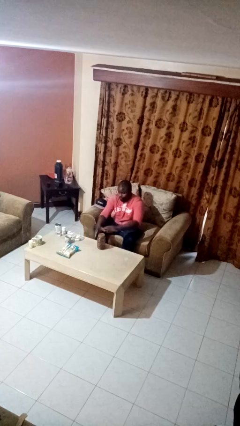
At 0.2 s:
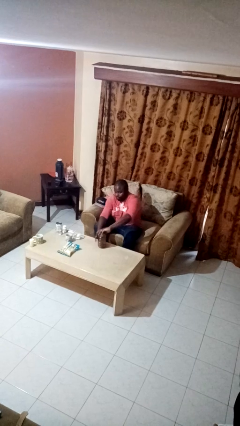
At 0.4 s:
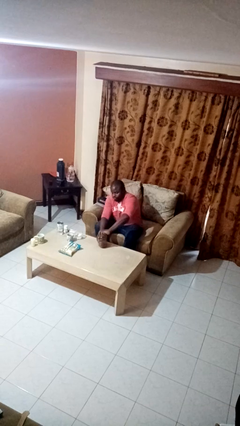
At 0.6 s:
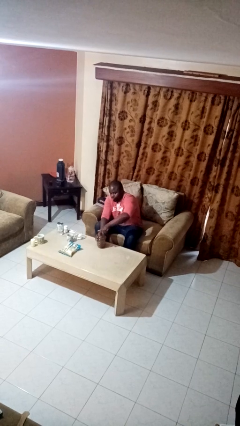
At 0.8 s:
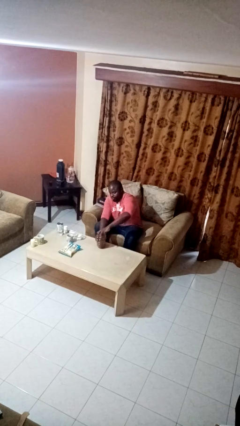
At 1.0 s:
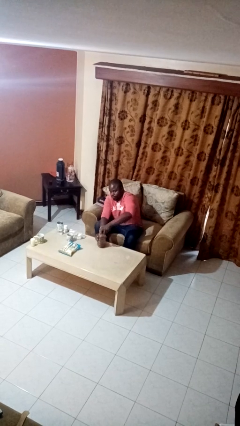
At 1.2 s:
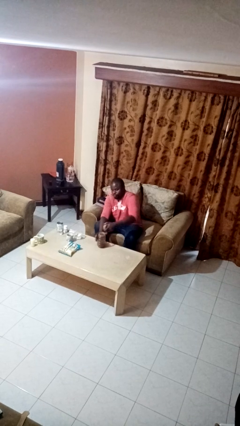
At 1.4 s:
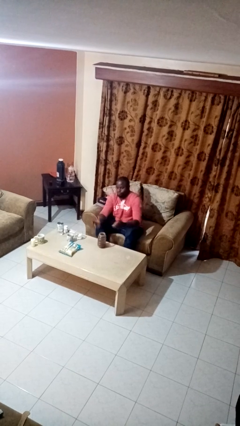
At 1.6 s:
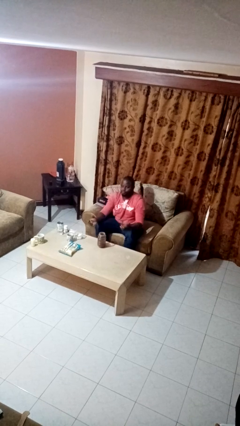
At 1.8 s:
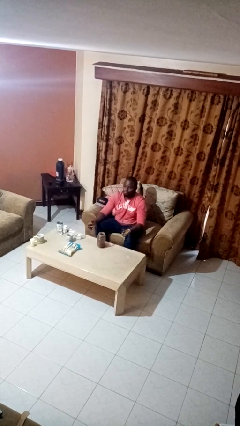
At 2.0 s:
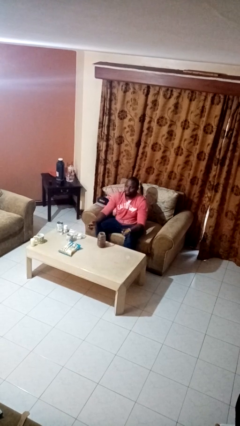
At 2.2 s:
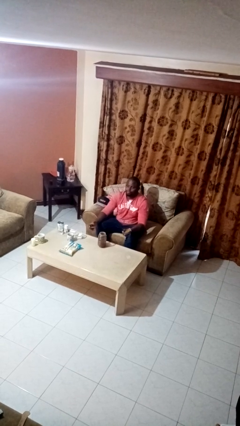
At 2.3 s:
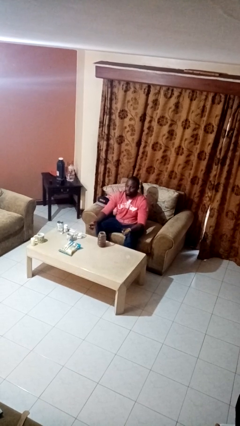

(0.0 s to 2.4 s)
person opens jar

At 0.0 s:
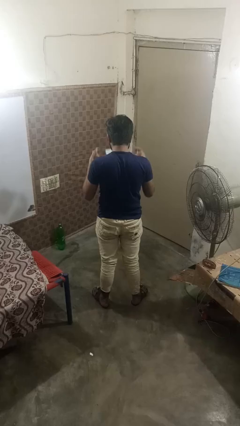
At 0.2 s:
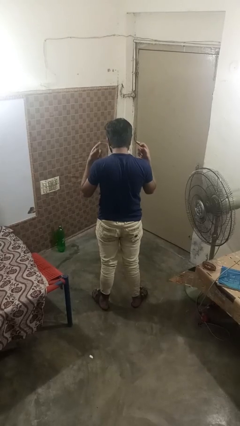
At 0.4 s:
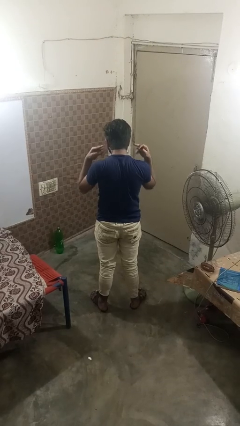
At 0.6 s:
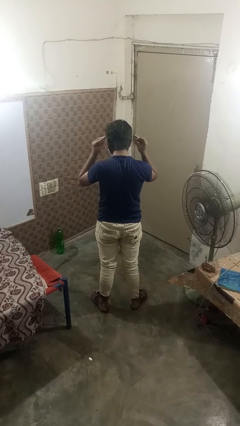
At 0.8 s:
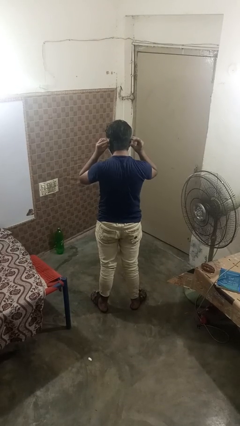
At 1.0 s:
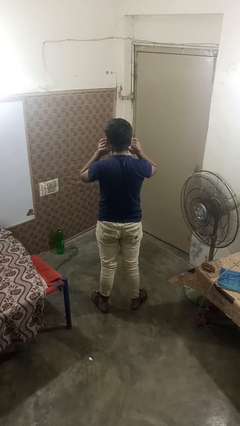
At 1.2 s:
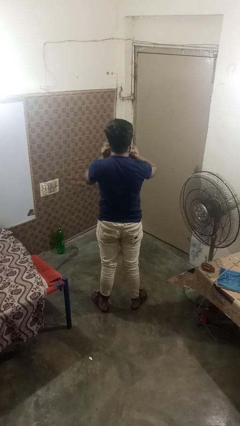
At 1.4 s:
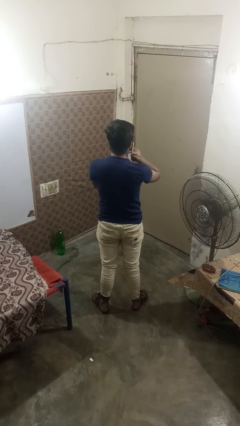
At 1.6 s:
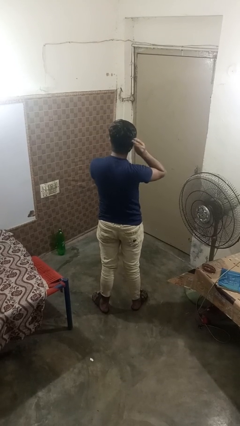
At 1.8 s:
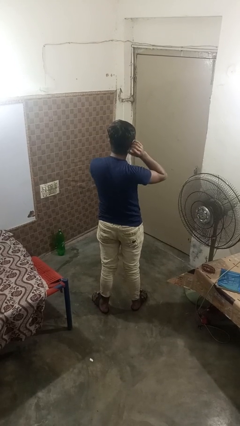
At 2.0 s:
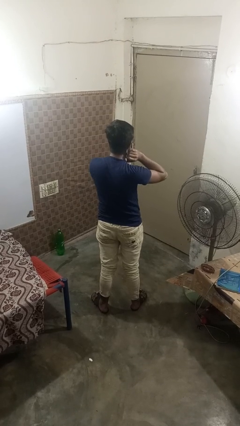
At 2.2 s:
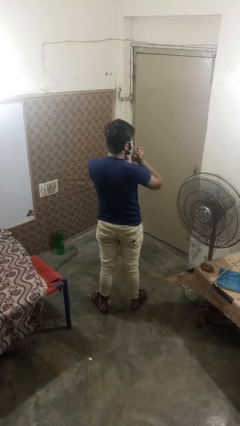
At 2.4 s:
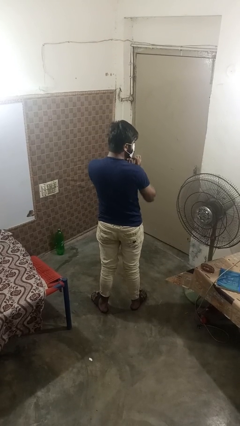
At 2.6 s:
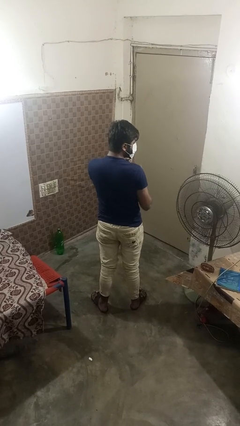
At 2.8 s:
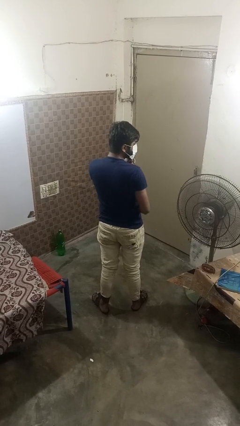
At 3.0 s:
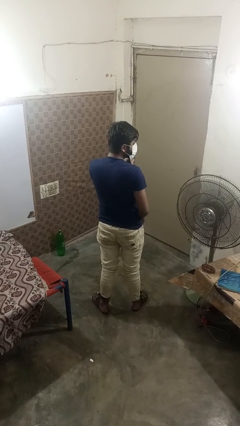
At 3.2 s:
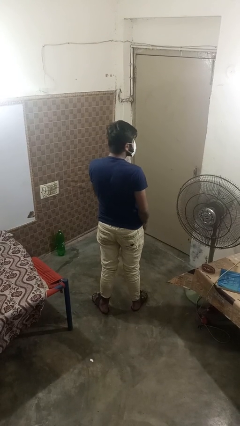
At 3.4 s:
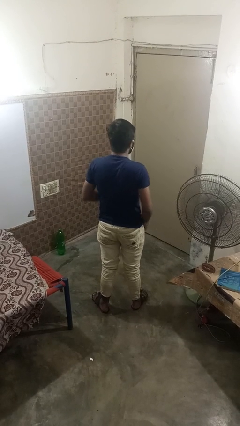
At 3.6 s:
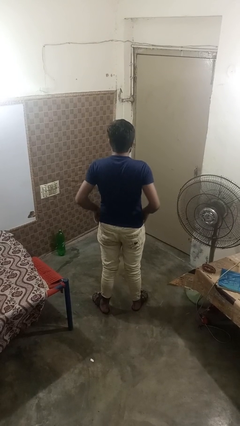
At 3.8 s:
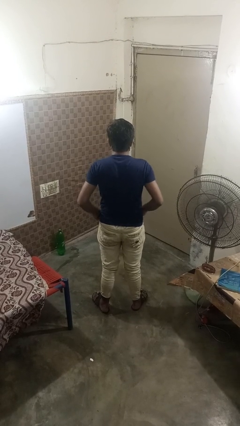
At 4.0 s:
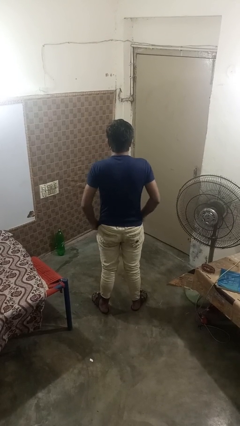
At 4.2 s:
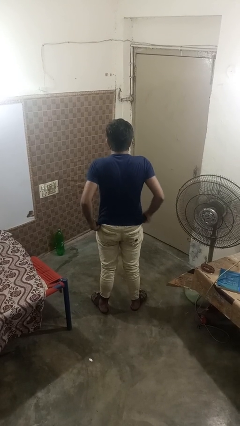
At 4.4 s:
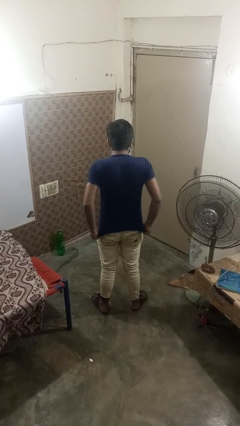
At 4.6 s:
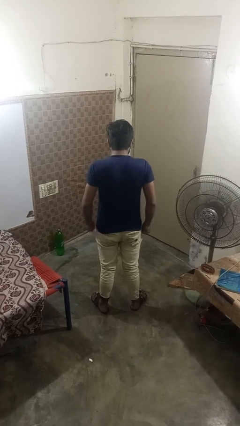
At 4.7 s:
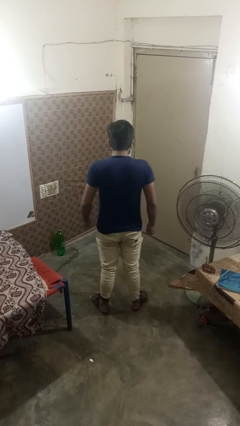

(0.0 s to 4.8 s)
person puts on facemask

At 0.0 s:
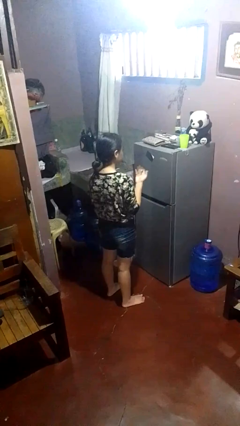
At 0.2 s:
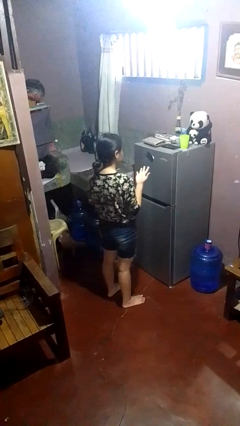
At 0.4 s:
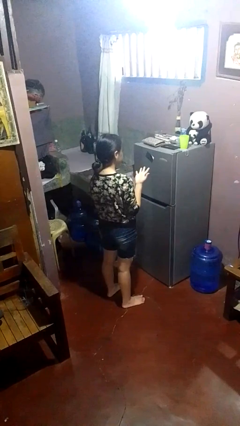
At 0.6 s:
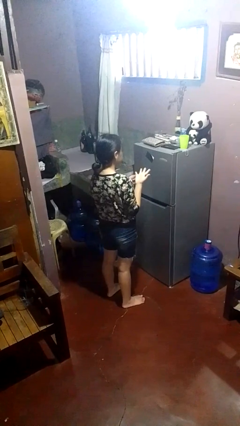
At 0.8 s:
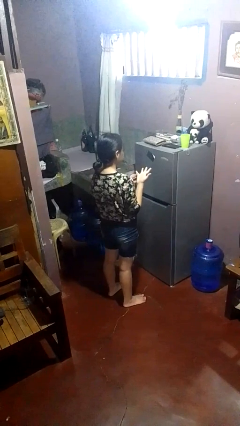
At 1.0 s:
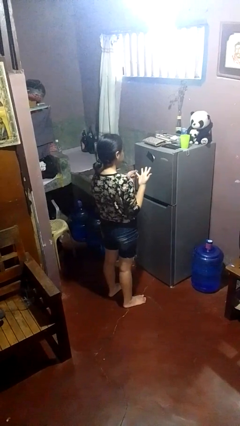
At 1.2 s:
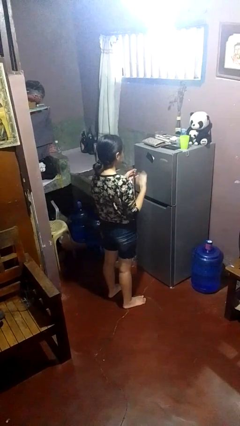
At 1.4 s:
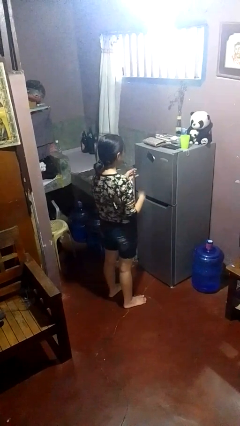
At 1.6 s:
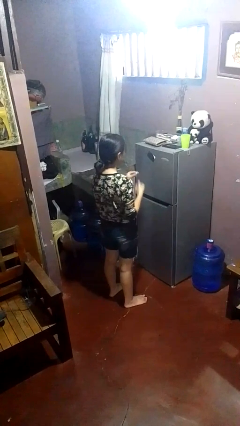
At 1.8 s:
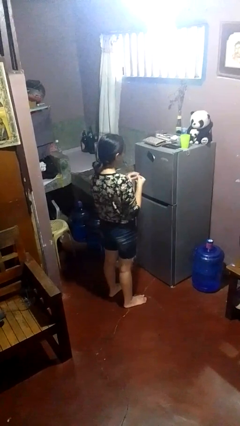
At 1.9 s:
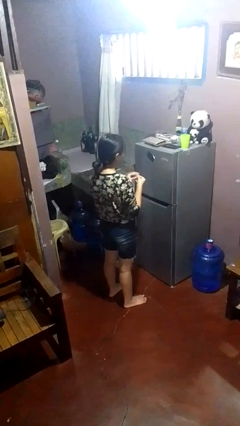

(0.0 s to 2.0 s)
person takes off ring

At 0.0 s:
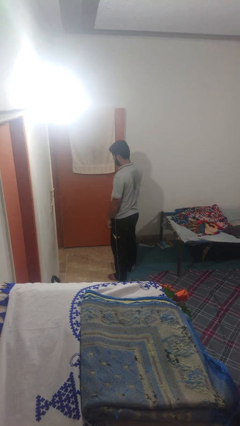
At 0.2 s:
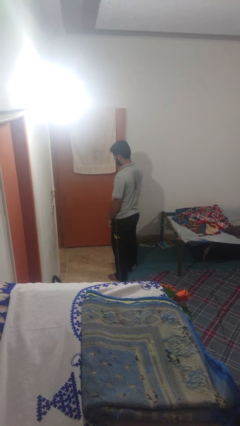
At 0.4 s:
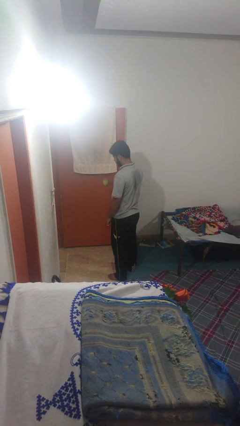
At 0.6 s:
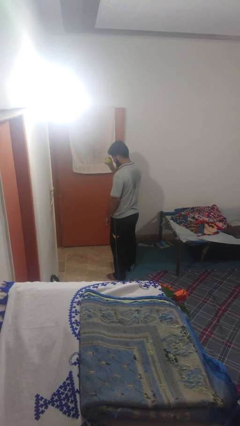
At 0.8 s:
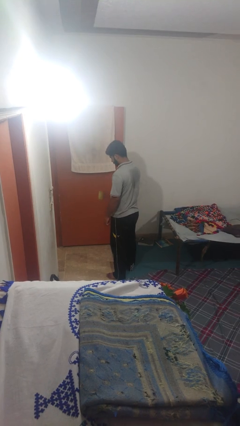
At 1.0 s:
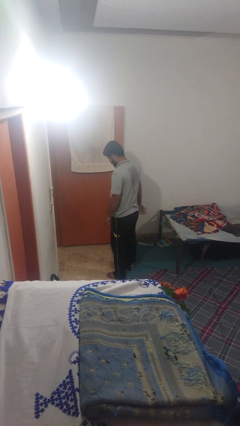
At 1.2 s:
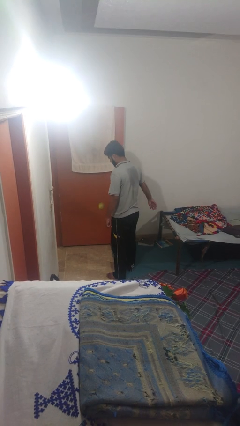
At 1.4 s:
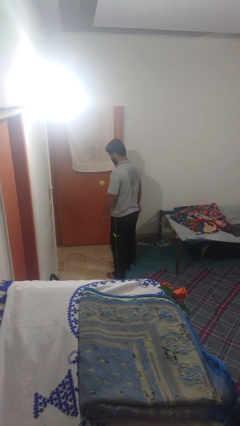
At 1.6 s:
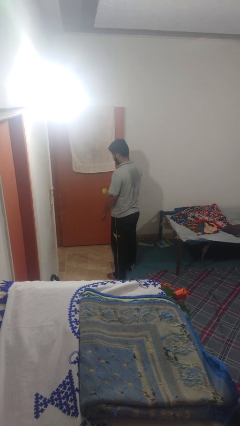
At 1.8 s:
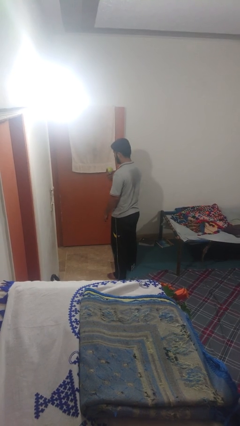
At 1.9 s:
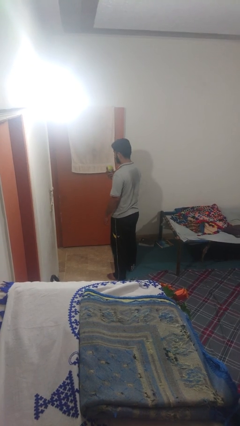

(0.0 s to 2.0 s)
person bounces ball on floor

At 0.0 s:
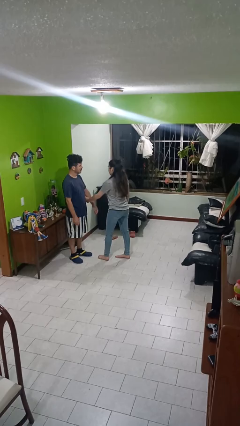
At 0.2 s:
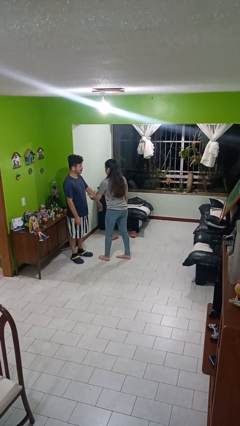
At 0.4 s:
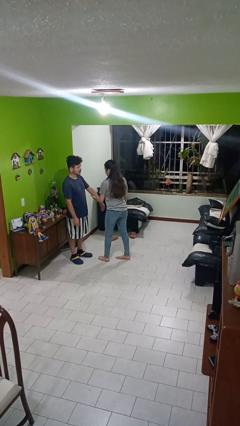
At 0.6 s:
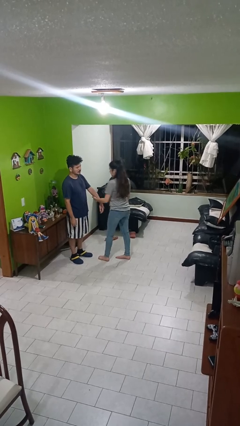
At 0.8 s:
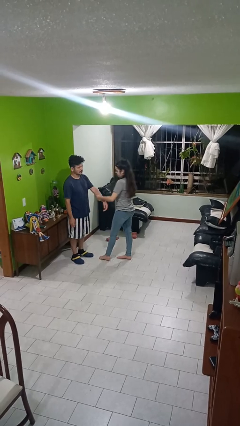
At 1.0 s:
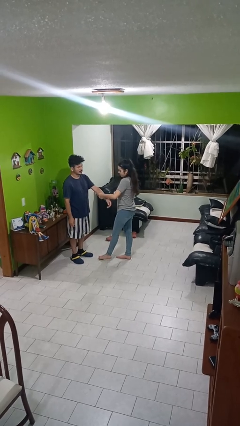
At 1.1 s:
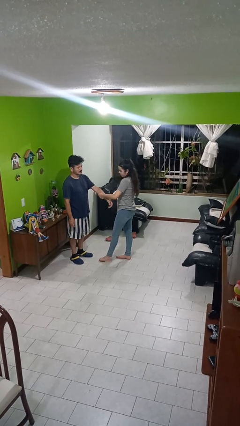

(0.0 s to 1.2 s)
person grabs person by forearm

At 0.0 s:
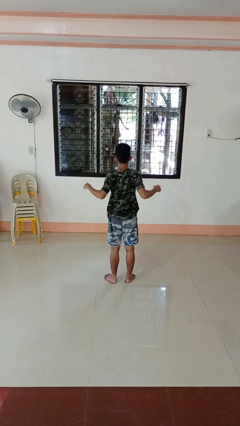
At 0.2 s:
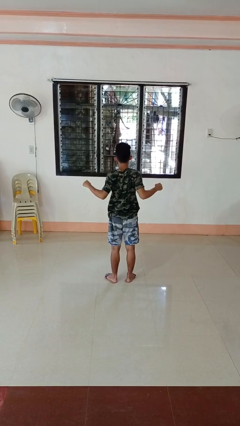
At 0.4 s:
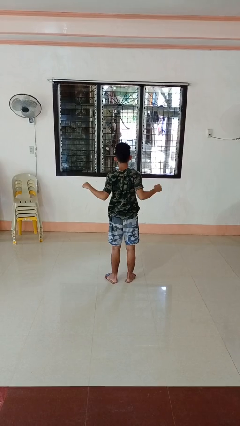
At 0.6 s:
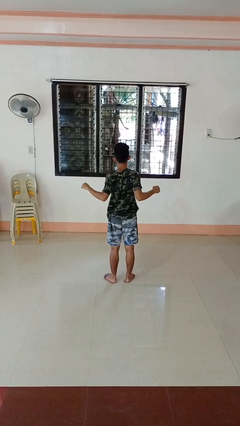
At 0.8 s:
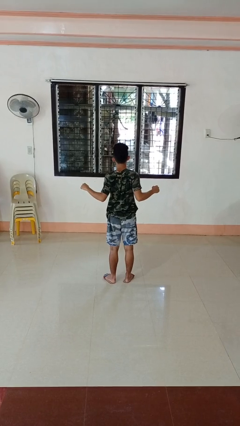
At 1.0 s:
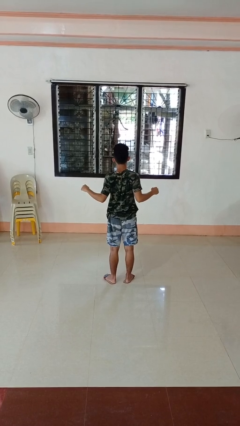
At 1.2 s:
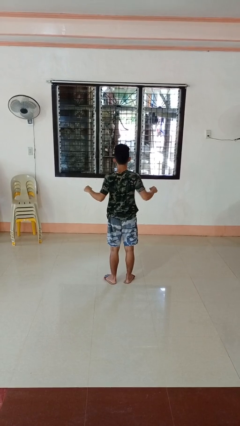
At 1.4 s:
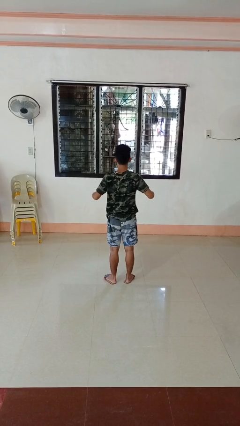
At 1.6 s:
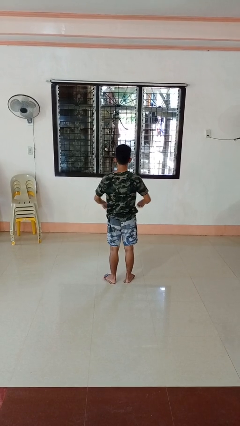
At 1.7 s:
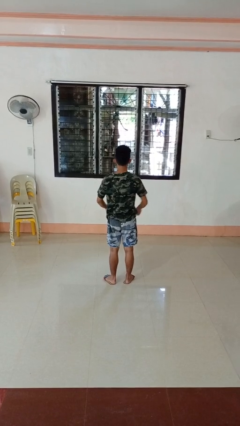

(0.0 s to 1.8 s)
person stretches back

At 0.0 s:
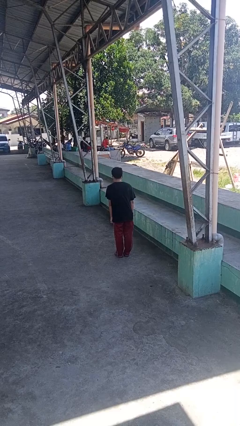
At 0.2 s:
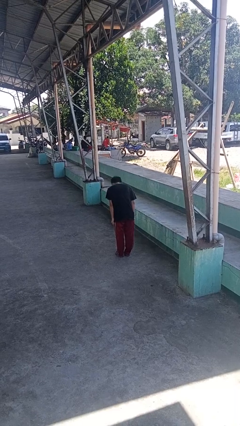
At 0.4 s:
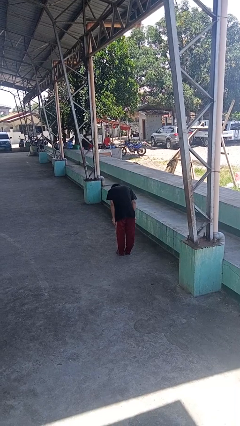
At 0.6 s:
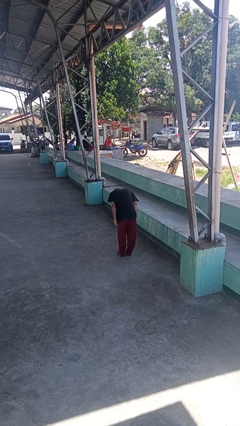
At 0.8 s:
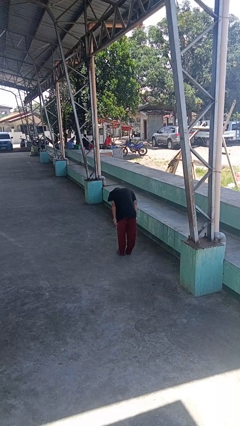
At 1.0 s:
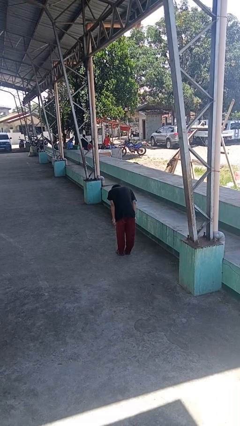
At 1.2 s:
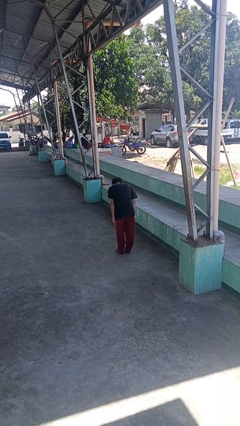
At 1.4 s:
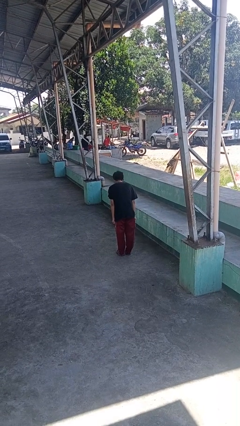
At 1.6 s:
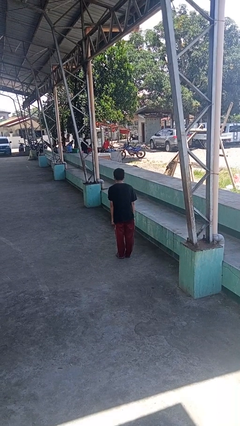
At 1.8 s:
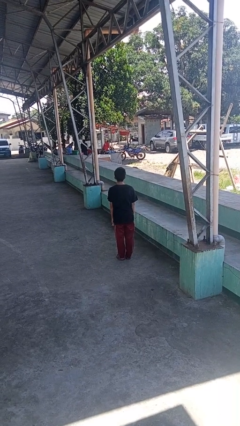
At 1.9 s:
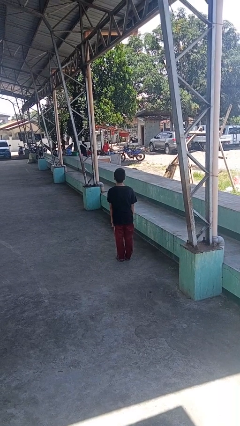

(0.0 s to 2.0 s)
person bows

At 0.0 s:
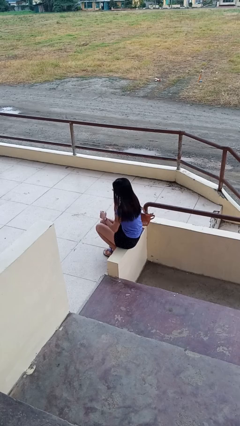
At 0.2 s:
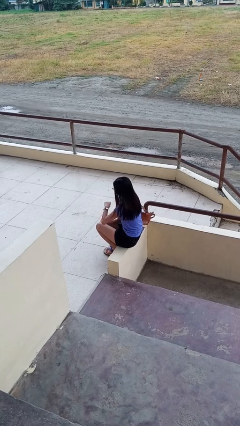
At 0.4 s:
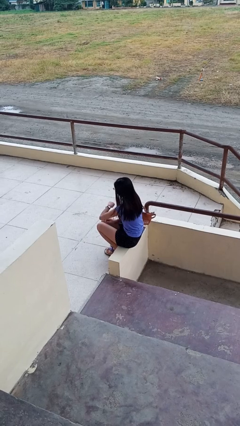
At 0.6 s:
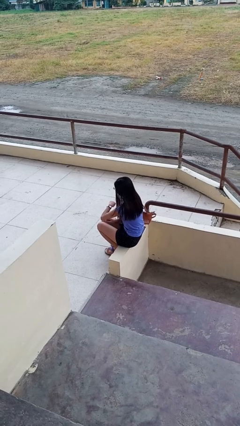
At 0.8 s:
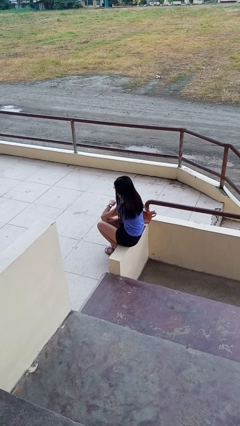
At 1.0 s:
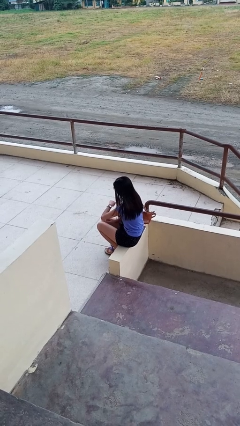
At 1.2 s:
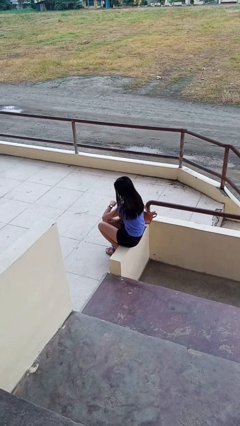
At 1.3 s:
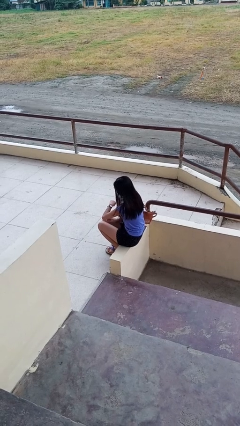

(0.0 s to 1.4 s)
person looks at wristwatch
